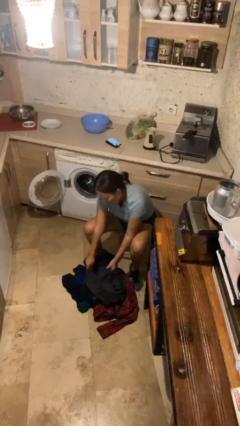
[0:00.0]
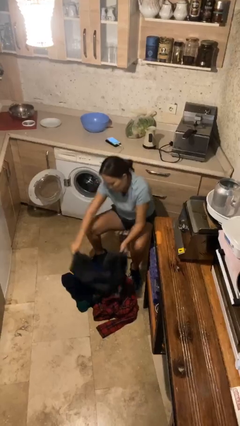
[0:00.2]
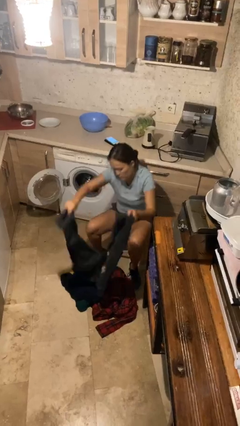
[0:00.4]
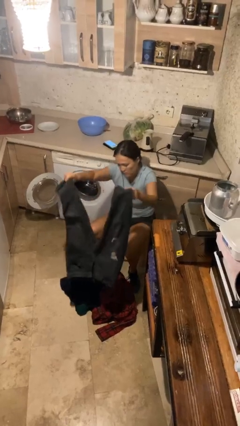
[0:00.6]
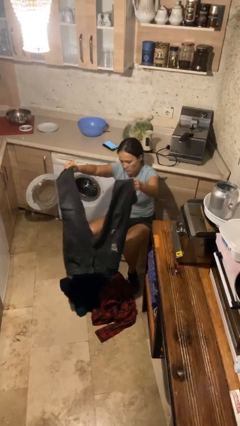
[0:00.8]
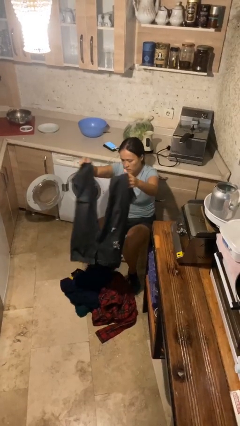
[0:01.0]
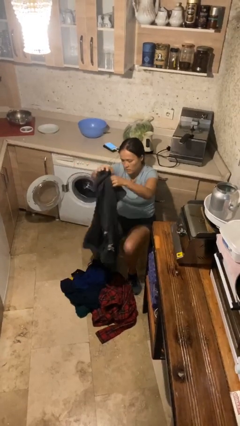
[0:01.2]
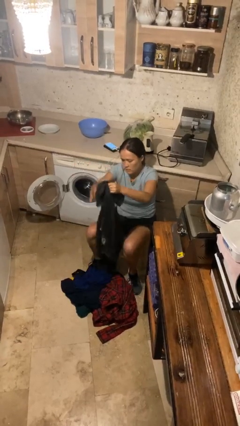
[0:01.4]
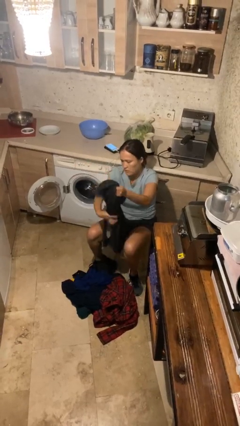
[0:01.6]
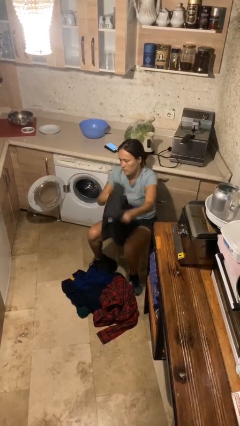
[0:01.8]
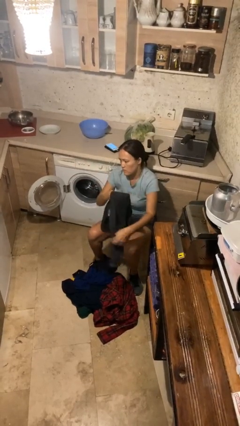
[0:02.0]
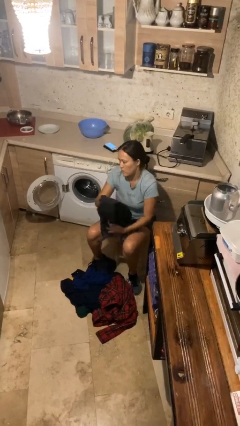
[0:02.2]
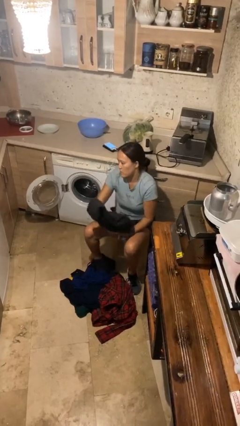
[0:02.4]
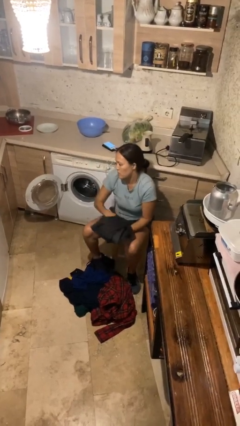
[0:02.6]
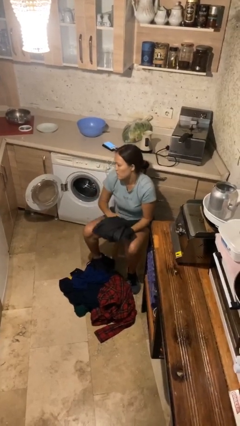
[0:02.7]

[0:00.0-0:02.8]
person folds pants

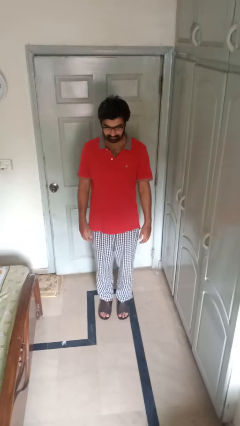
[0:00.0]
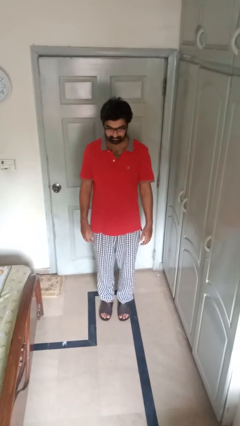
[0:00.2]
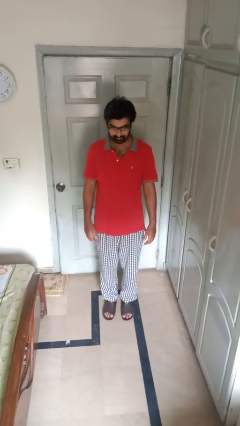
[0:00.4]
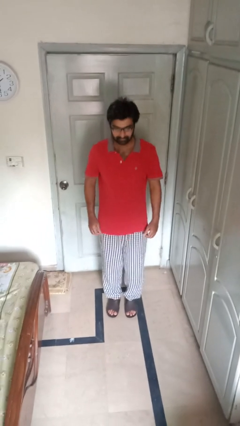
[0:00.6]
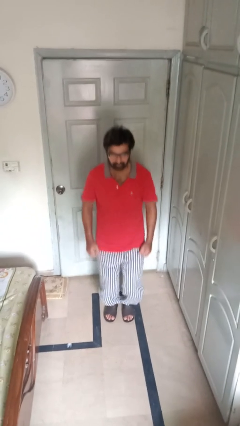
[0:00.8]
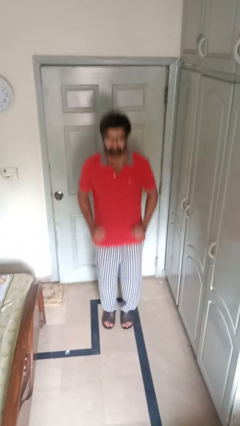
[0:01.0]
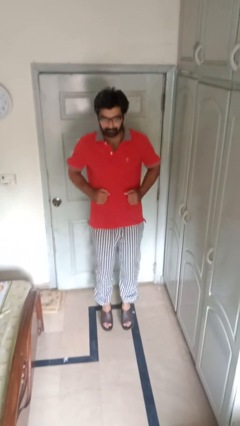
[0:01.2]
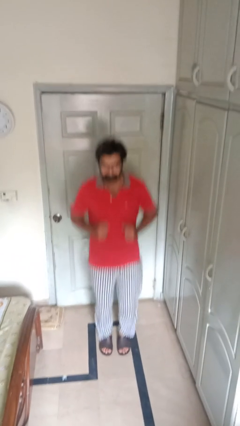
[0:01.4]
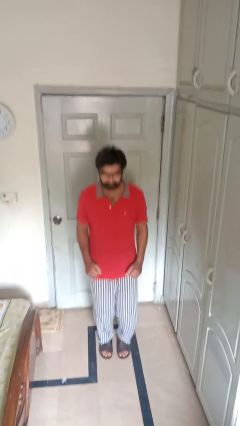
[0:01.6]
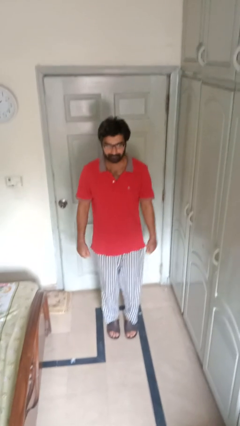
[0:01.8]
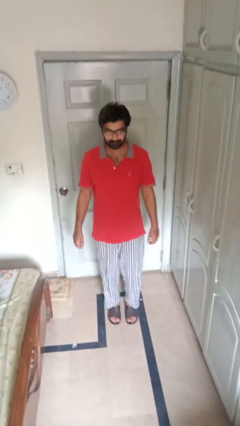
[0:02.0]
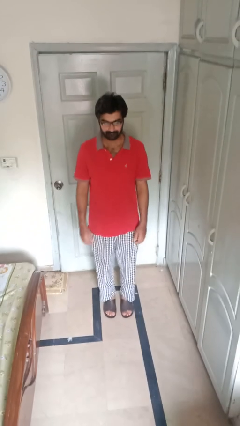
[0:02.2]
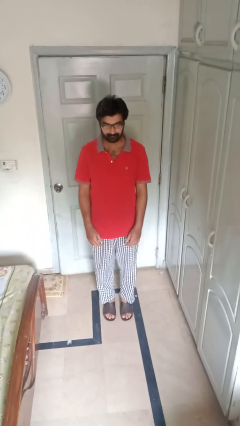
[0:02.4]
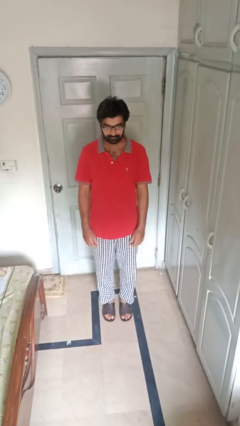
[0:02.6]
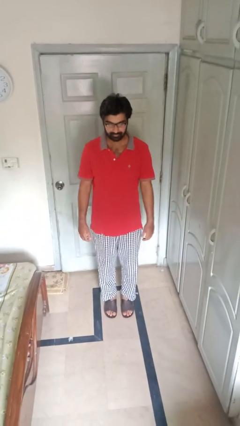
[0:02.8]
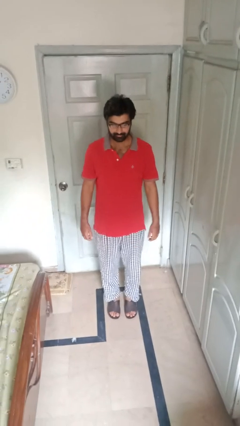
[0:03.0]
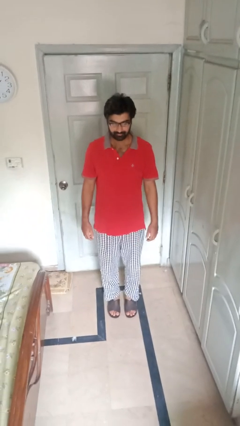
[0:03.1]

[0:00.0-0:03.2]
person jumps

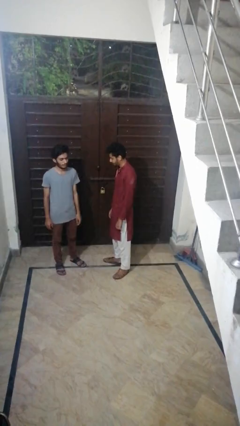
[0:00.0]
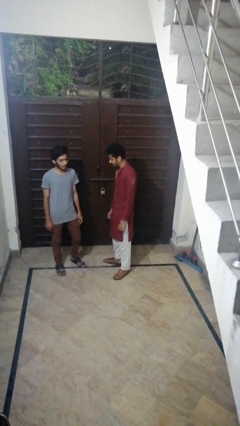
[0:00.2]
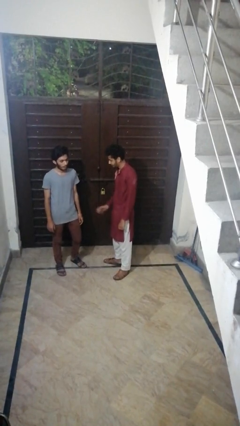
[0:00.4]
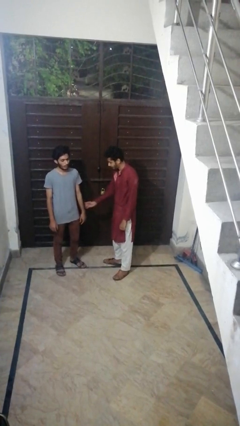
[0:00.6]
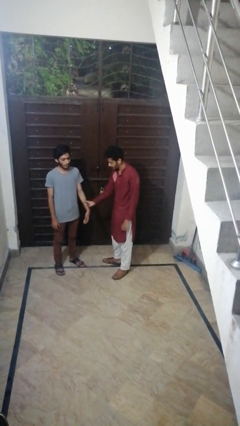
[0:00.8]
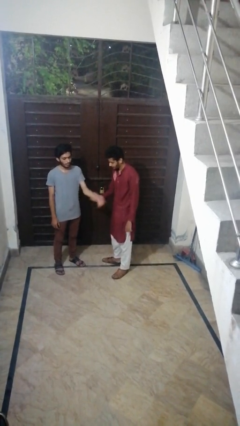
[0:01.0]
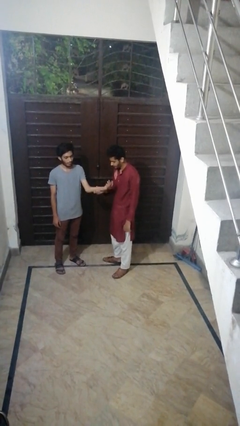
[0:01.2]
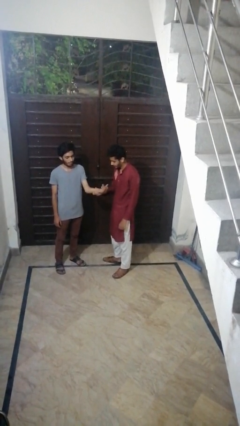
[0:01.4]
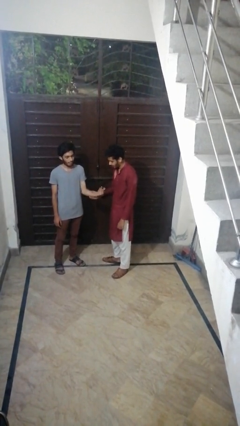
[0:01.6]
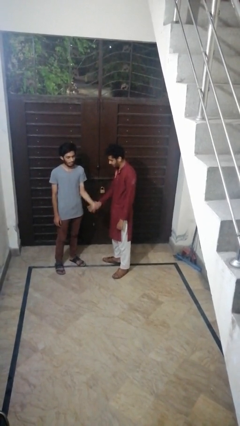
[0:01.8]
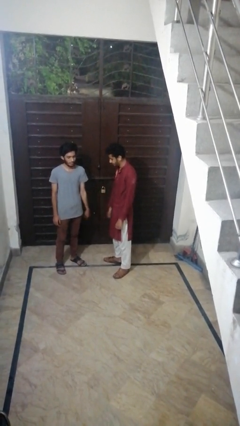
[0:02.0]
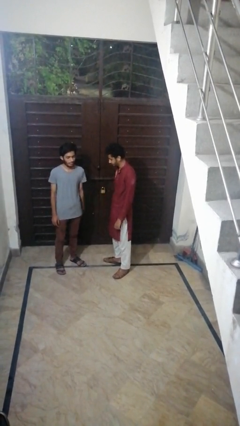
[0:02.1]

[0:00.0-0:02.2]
person grabs person by forearm

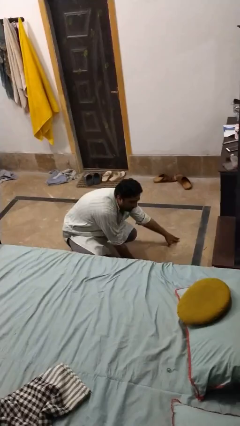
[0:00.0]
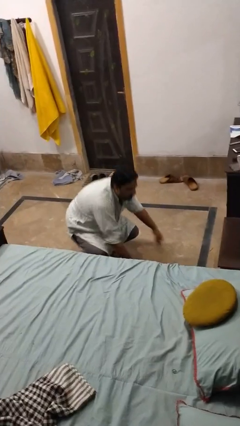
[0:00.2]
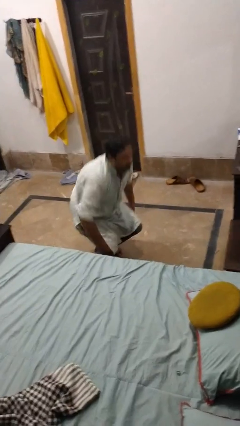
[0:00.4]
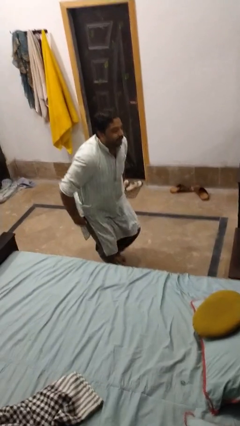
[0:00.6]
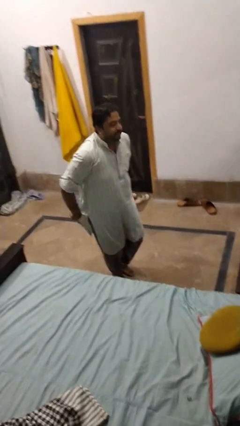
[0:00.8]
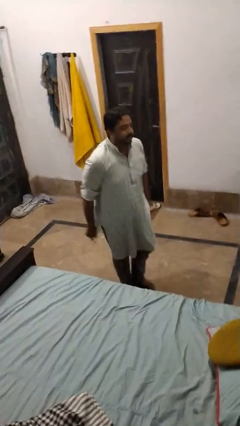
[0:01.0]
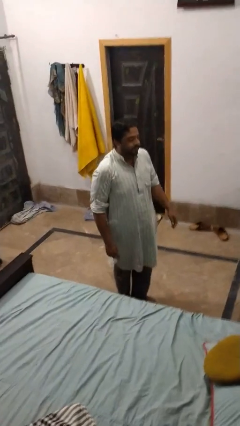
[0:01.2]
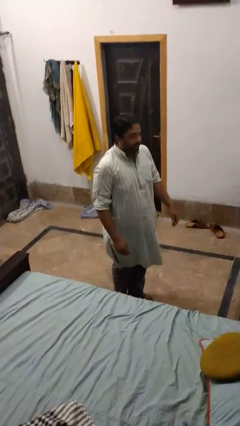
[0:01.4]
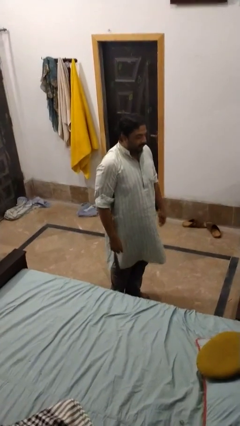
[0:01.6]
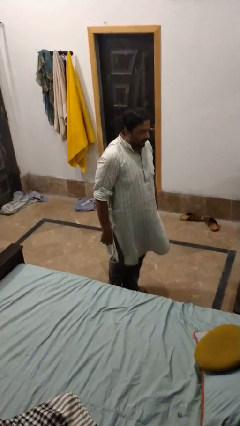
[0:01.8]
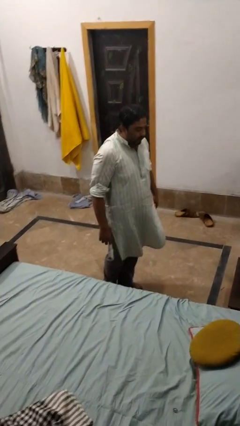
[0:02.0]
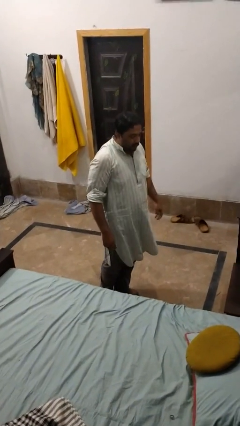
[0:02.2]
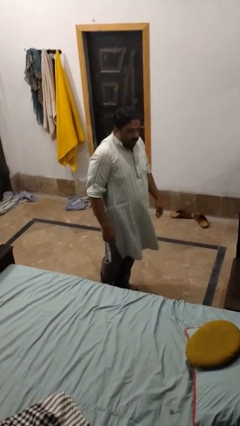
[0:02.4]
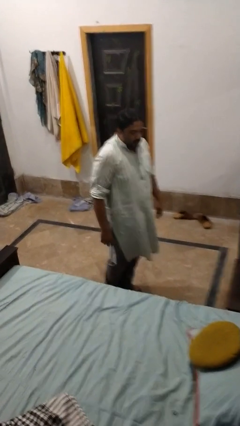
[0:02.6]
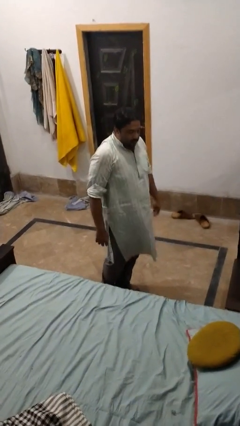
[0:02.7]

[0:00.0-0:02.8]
person stands up from floor

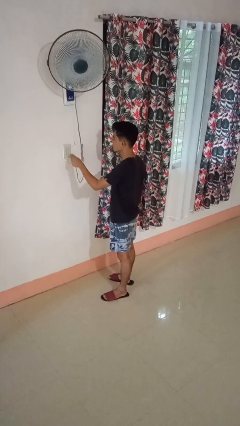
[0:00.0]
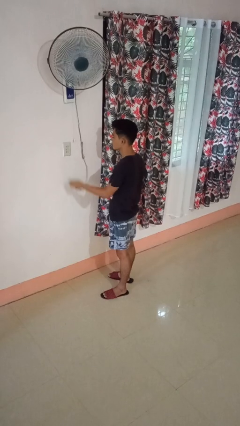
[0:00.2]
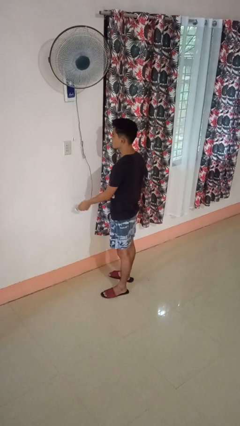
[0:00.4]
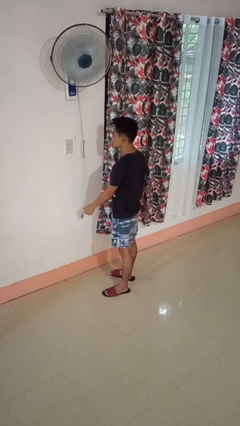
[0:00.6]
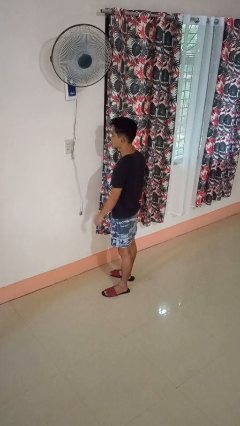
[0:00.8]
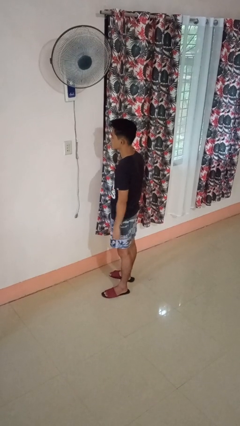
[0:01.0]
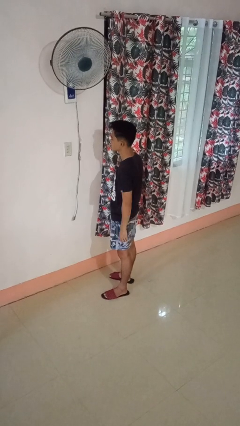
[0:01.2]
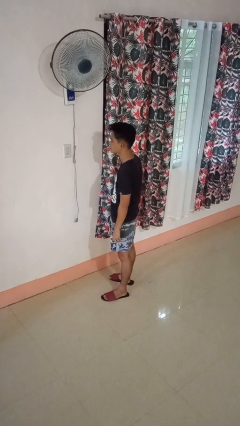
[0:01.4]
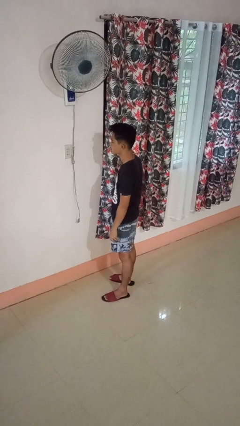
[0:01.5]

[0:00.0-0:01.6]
person unplugs from electrical socket

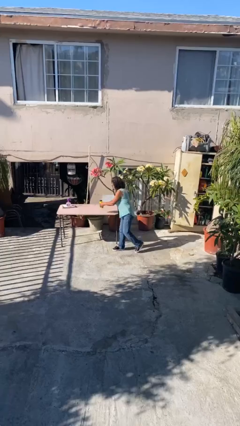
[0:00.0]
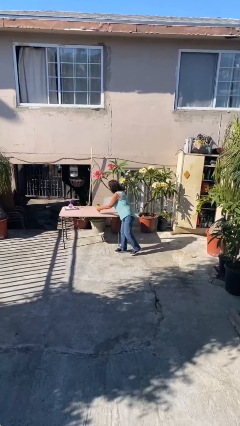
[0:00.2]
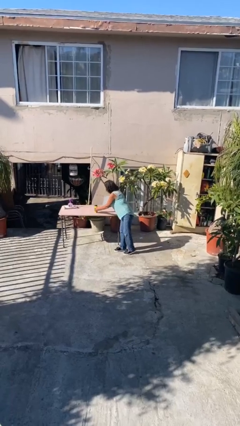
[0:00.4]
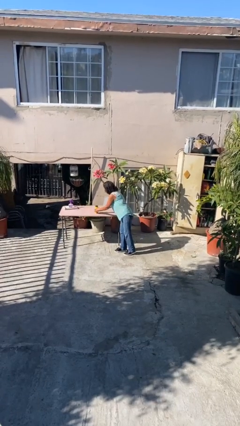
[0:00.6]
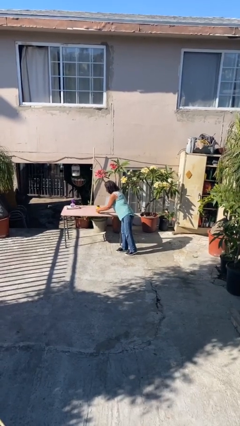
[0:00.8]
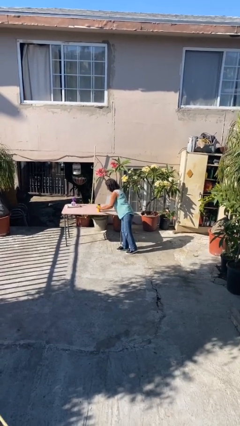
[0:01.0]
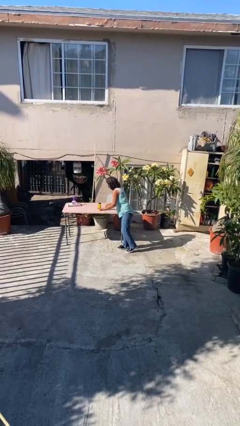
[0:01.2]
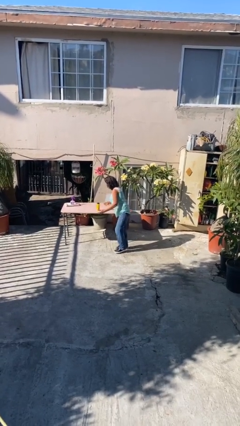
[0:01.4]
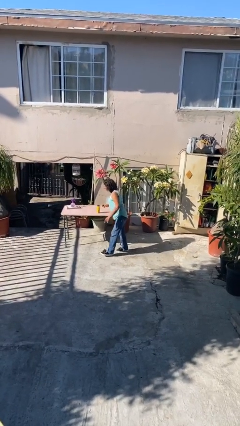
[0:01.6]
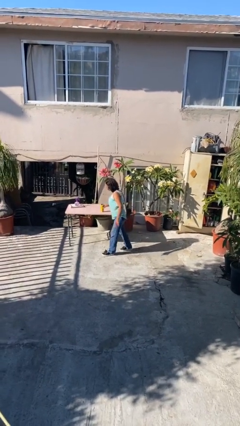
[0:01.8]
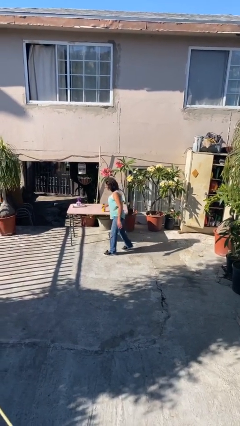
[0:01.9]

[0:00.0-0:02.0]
person puts down object on table

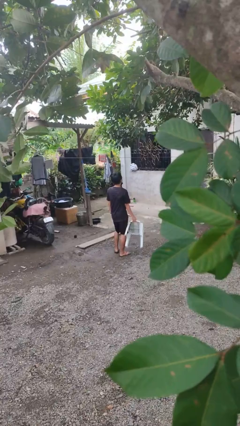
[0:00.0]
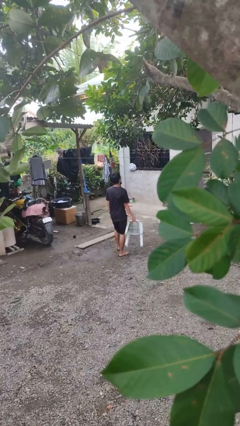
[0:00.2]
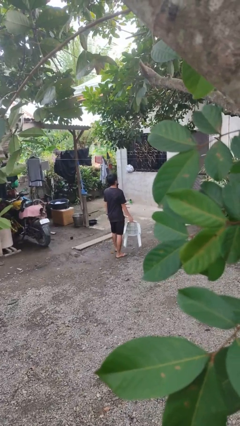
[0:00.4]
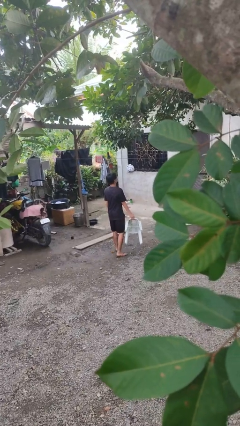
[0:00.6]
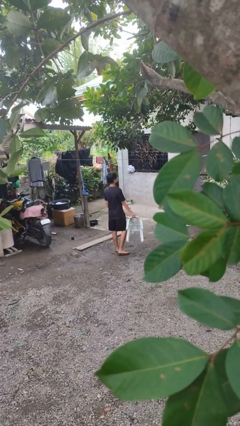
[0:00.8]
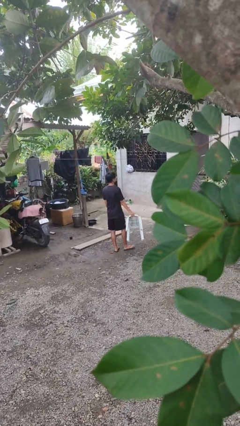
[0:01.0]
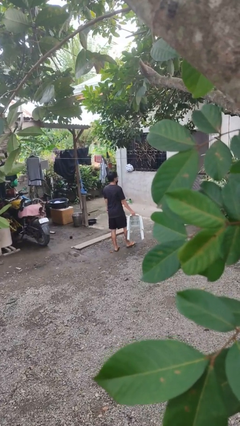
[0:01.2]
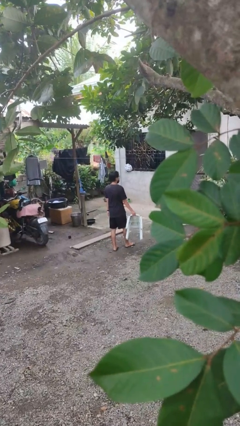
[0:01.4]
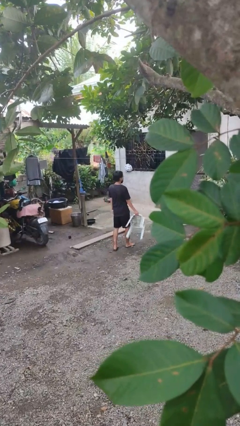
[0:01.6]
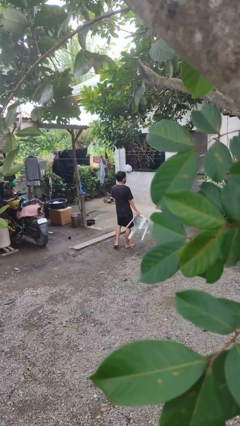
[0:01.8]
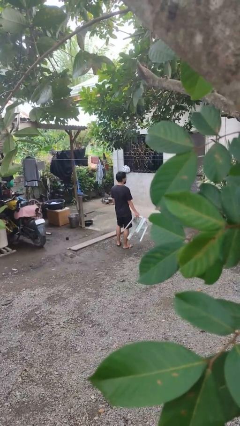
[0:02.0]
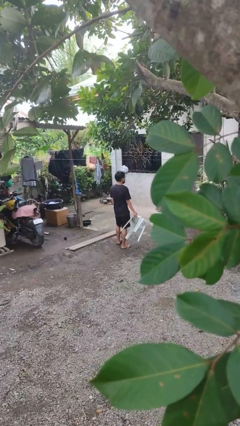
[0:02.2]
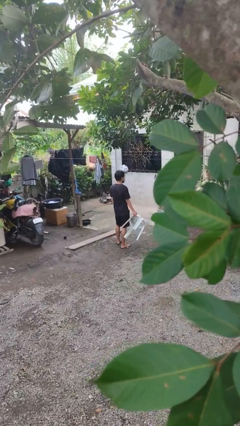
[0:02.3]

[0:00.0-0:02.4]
person carries furniture
